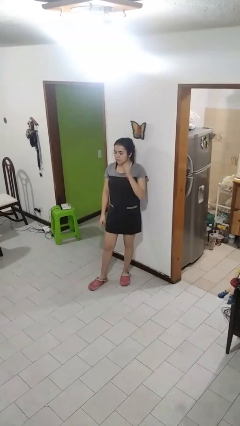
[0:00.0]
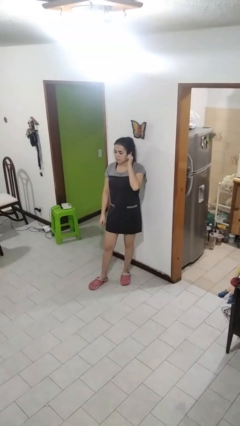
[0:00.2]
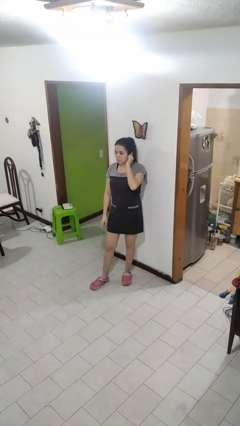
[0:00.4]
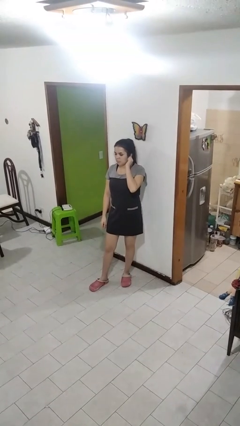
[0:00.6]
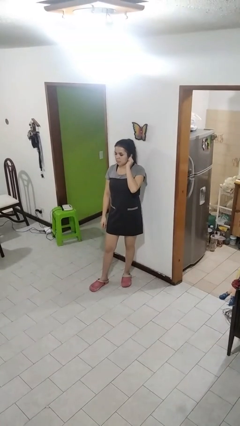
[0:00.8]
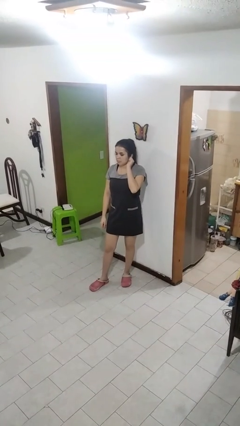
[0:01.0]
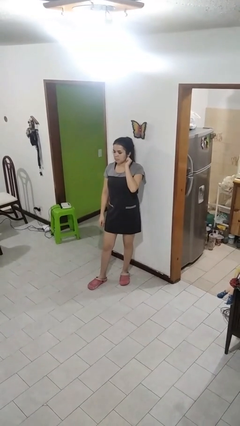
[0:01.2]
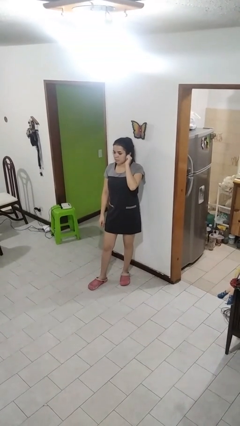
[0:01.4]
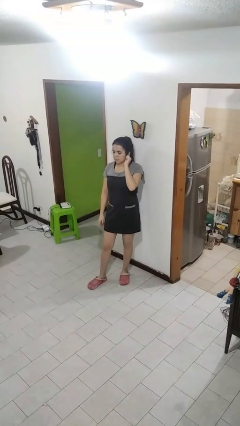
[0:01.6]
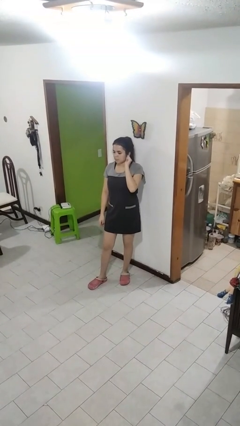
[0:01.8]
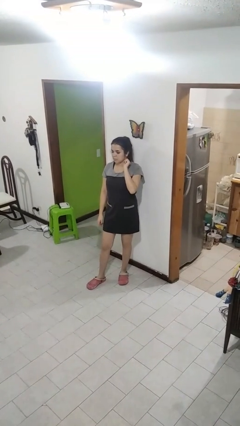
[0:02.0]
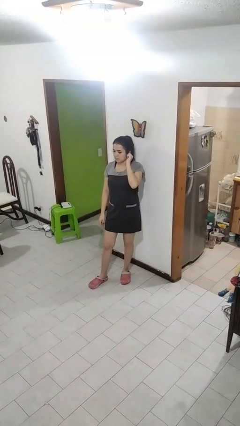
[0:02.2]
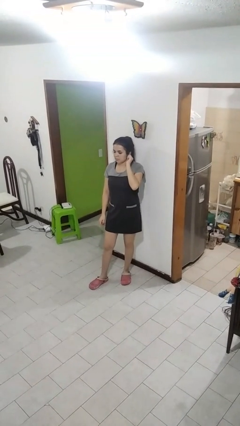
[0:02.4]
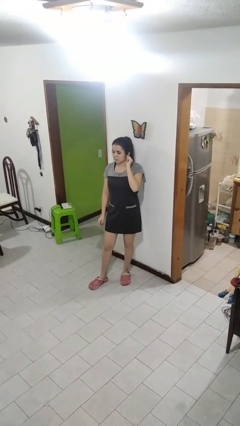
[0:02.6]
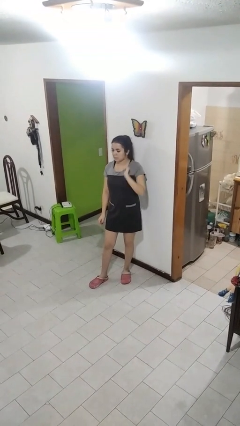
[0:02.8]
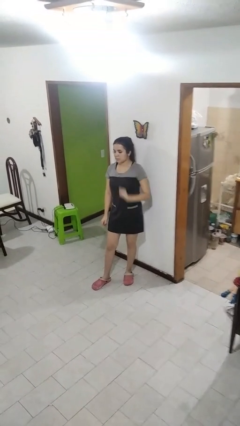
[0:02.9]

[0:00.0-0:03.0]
person touches earlobe

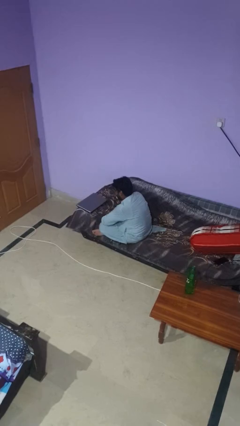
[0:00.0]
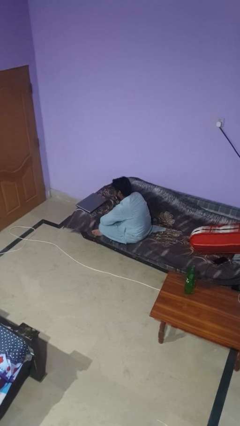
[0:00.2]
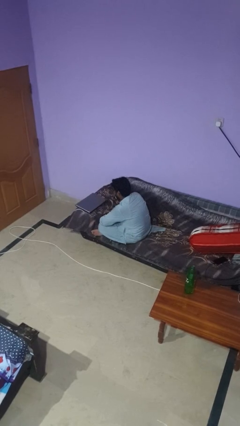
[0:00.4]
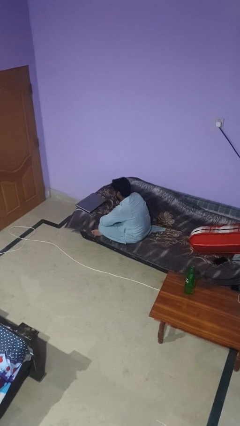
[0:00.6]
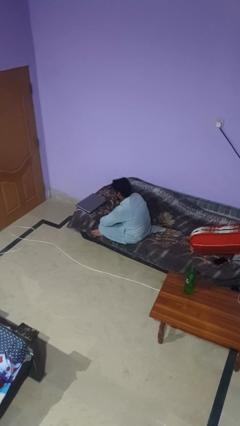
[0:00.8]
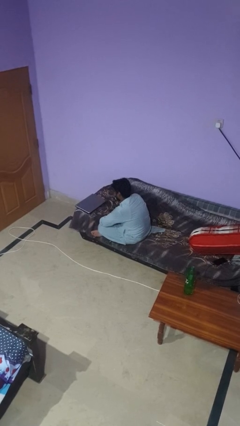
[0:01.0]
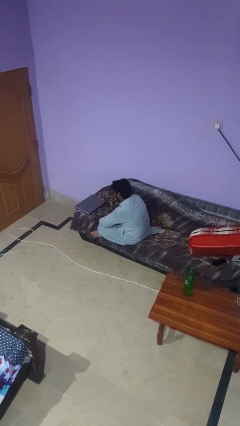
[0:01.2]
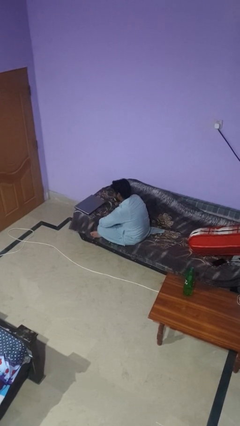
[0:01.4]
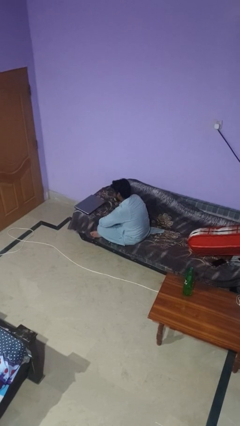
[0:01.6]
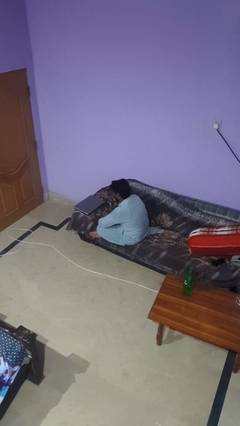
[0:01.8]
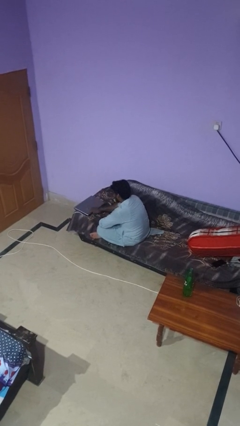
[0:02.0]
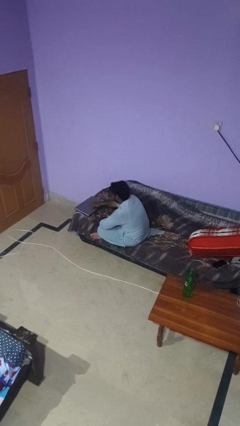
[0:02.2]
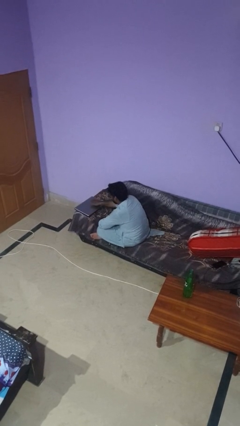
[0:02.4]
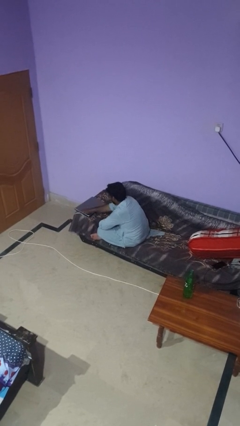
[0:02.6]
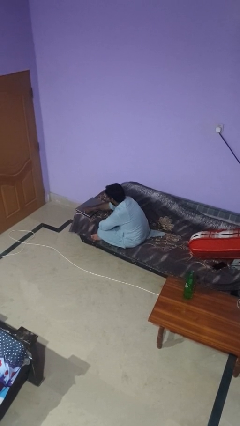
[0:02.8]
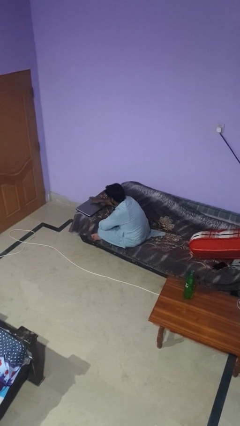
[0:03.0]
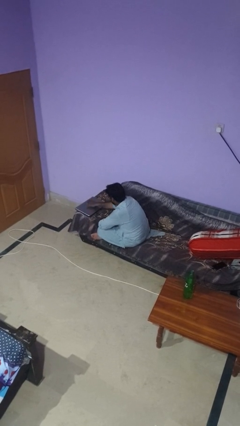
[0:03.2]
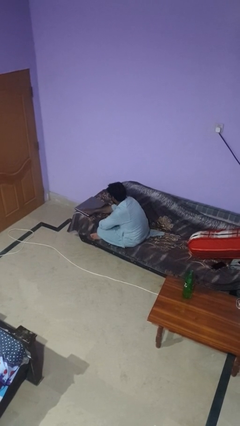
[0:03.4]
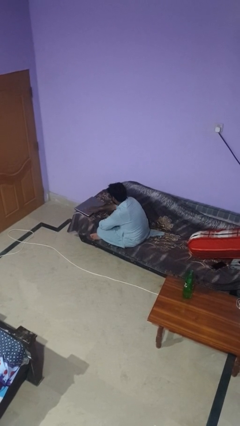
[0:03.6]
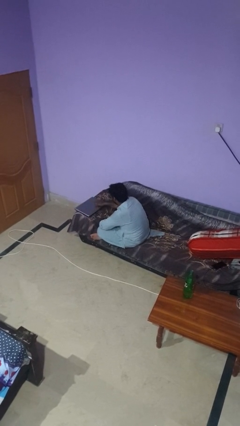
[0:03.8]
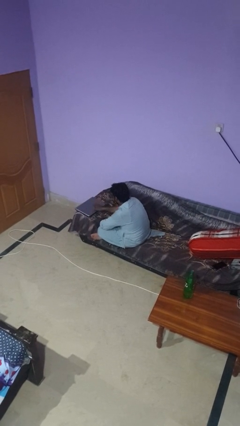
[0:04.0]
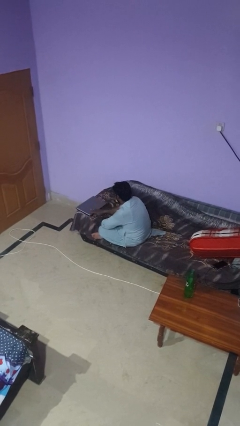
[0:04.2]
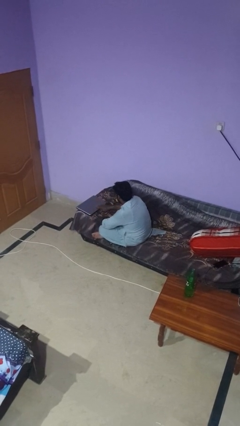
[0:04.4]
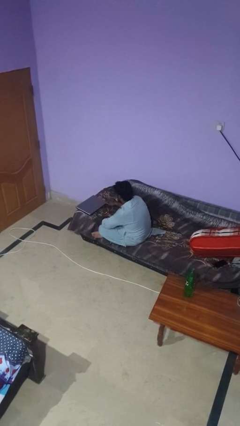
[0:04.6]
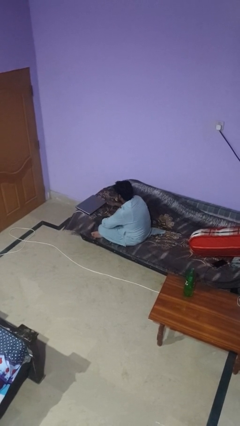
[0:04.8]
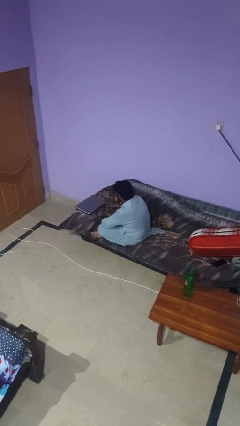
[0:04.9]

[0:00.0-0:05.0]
person waves hand over object

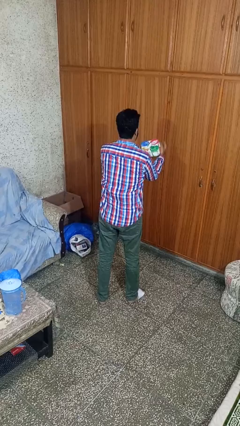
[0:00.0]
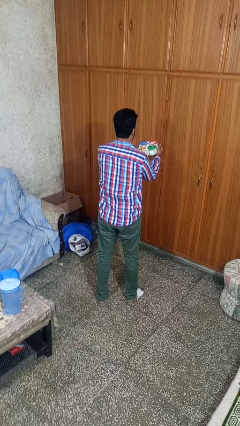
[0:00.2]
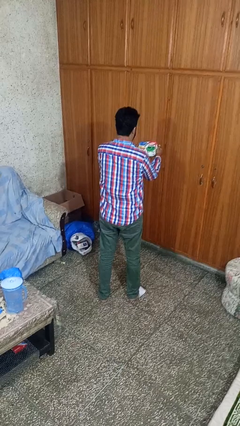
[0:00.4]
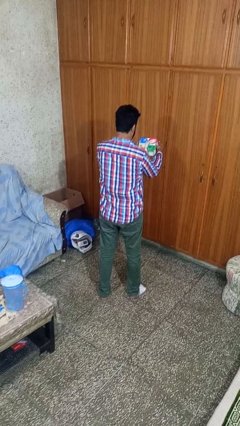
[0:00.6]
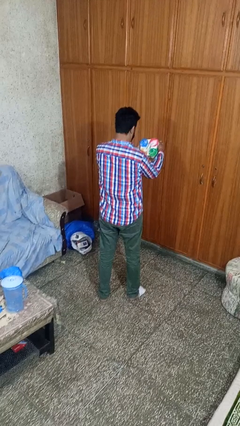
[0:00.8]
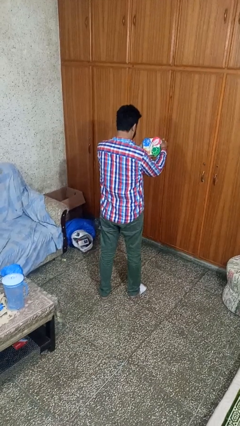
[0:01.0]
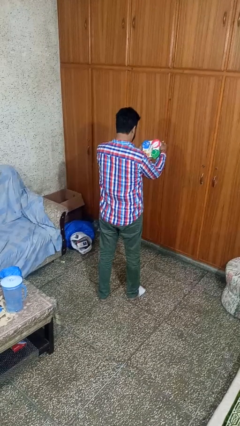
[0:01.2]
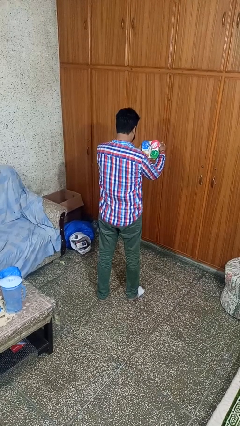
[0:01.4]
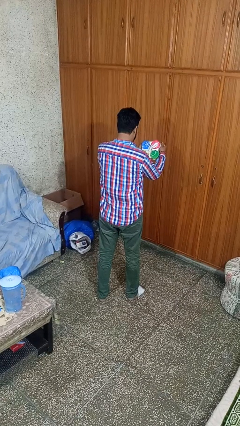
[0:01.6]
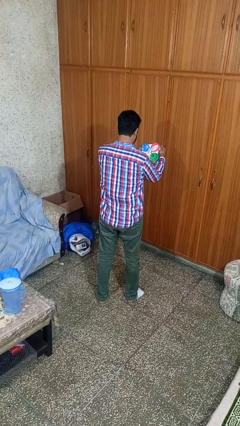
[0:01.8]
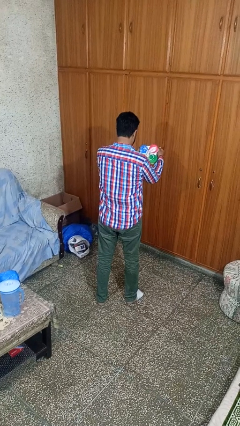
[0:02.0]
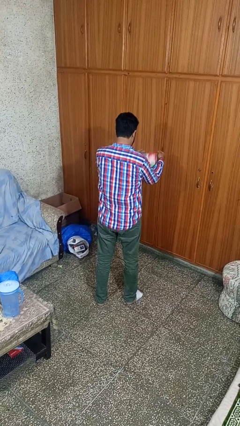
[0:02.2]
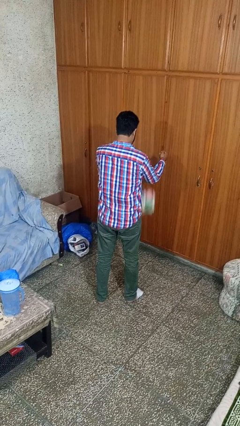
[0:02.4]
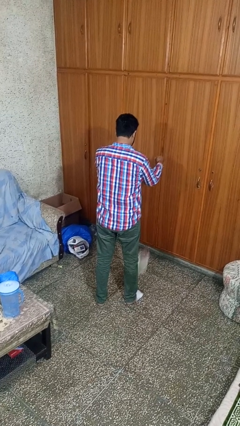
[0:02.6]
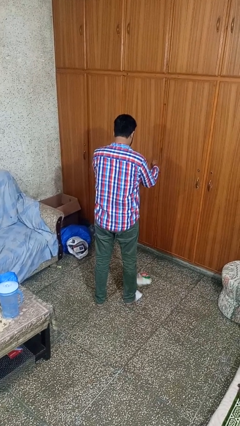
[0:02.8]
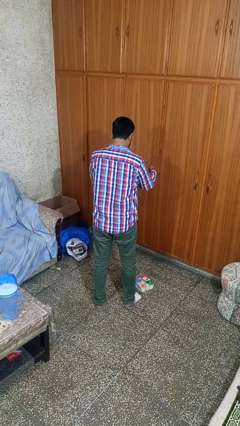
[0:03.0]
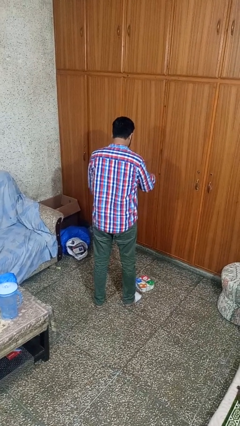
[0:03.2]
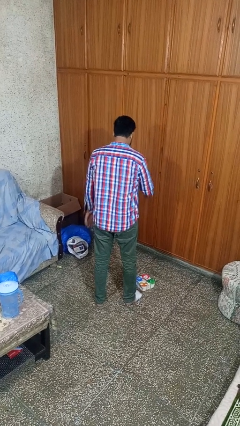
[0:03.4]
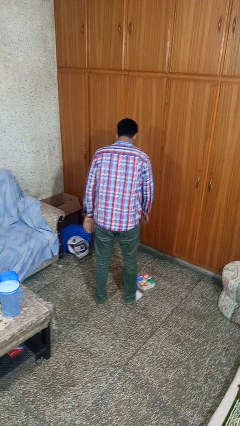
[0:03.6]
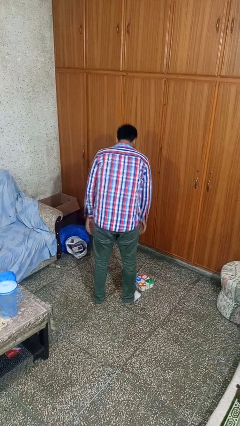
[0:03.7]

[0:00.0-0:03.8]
person catches dropped object

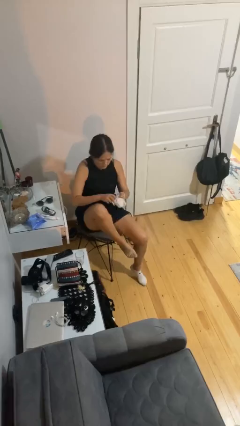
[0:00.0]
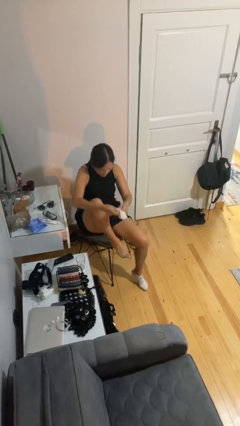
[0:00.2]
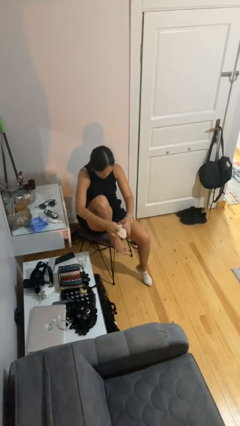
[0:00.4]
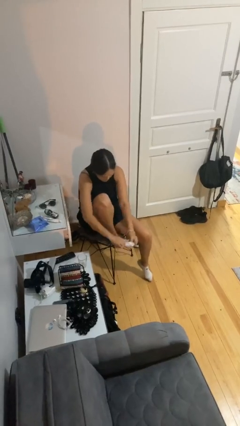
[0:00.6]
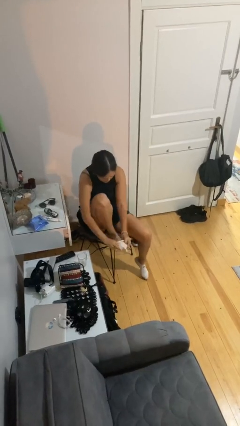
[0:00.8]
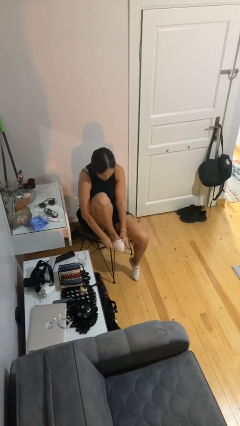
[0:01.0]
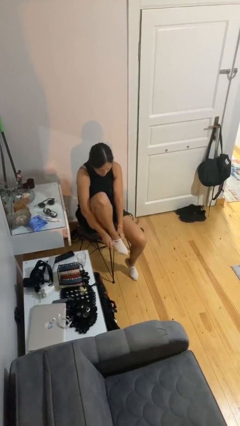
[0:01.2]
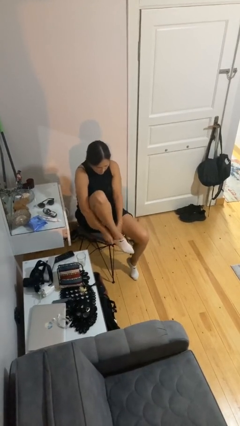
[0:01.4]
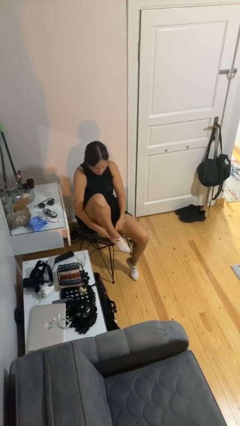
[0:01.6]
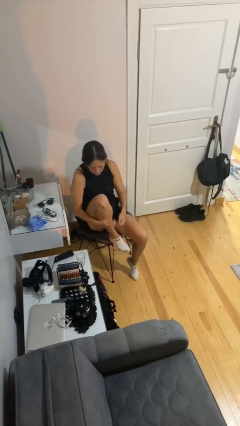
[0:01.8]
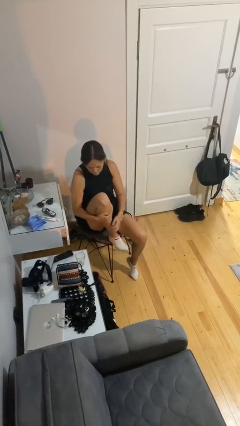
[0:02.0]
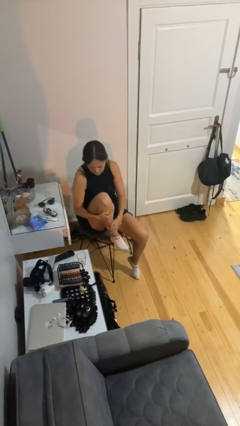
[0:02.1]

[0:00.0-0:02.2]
person puts on socks

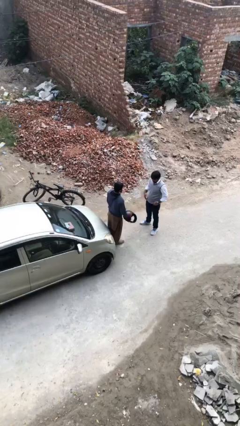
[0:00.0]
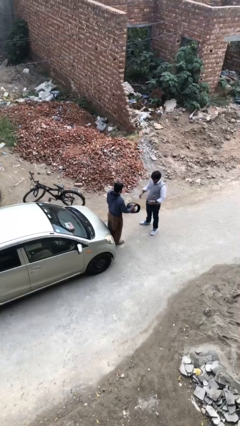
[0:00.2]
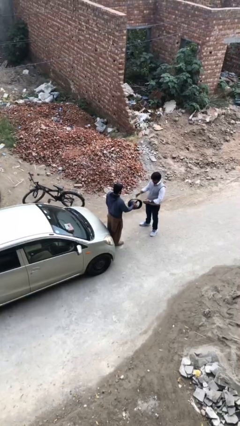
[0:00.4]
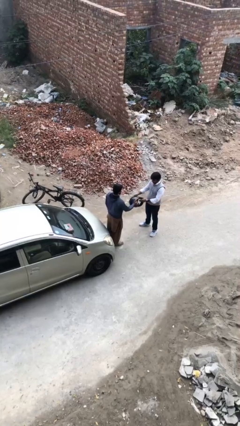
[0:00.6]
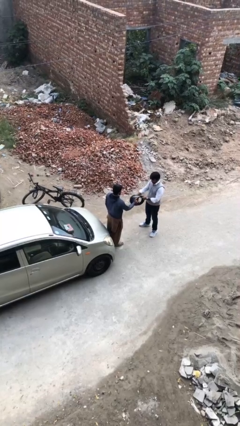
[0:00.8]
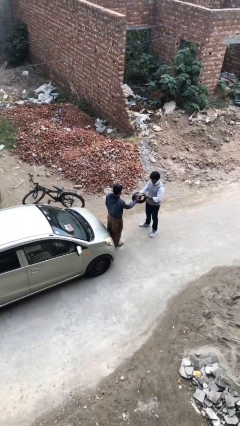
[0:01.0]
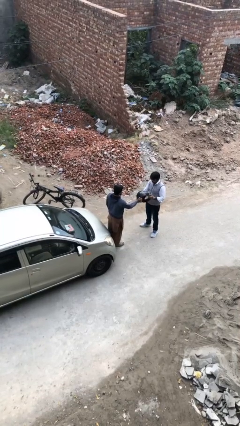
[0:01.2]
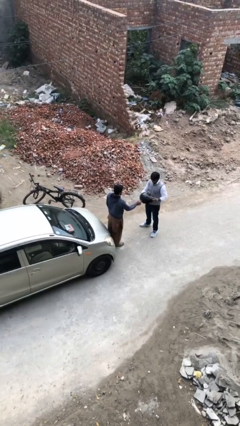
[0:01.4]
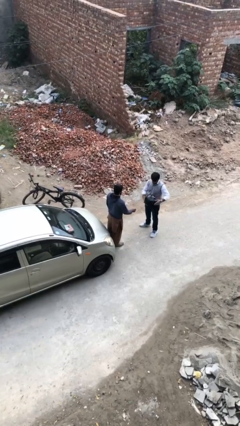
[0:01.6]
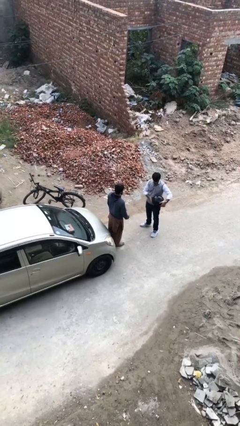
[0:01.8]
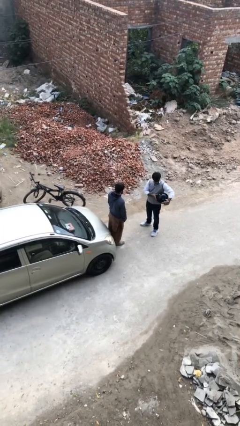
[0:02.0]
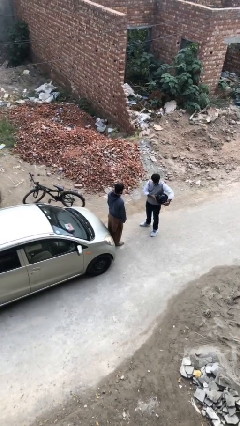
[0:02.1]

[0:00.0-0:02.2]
person transfers object to person

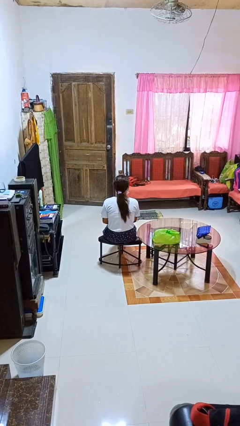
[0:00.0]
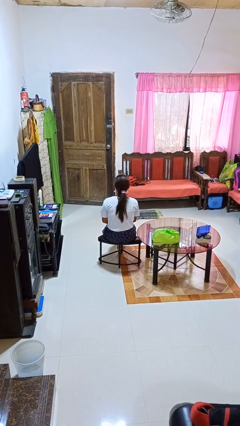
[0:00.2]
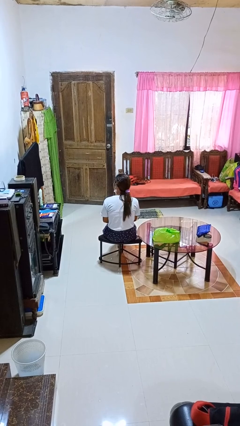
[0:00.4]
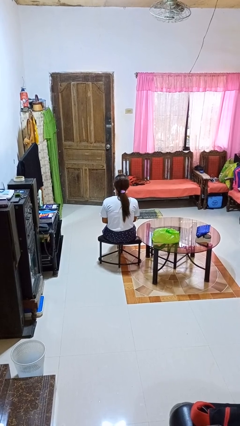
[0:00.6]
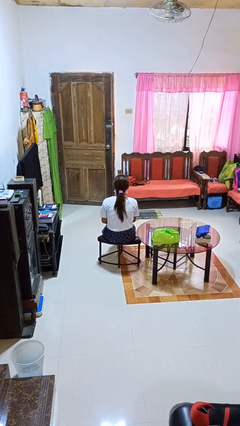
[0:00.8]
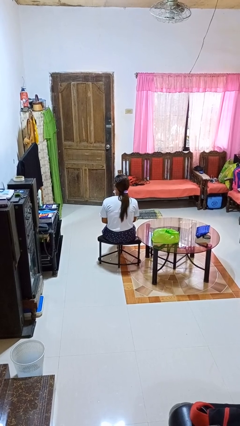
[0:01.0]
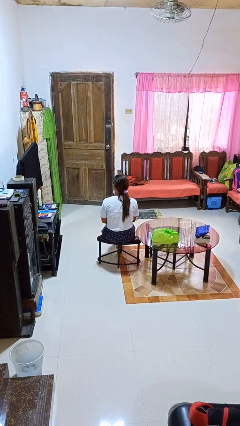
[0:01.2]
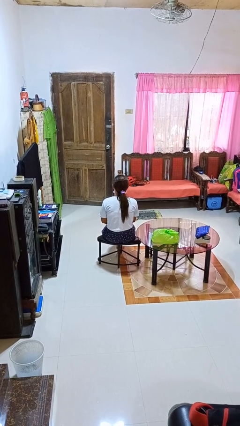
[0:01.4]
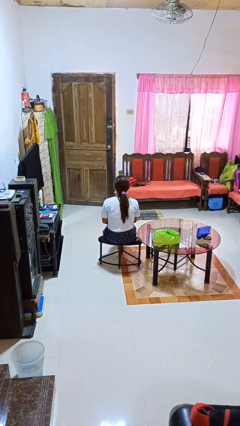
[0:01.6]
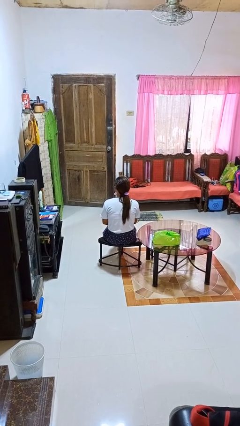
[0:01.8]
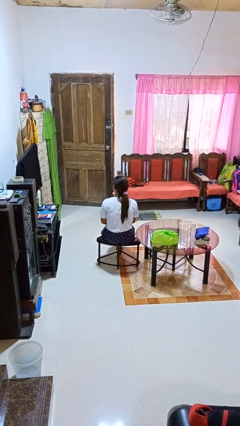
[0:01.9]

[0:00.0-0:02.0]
person shakes head
